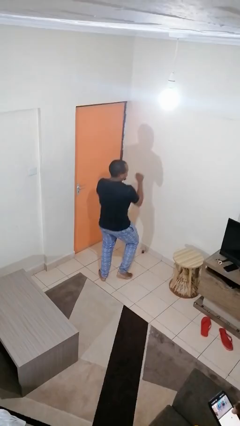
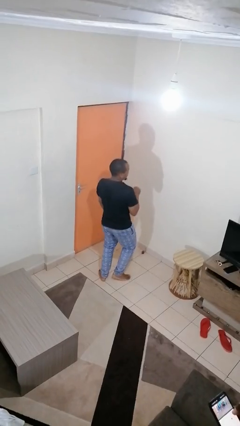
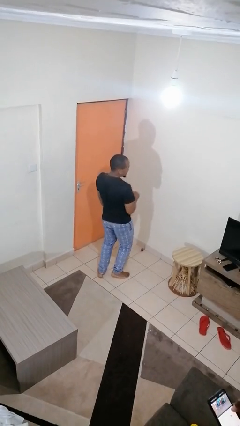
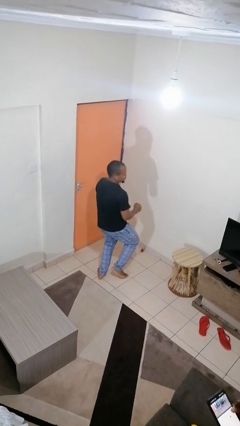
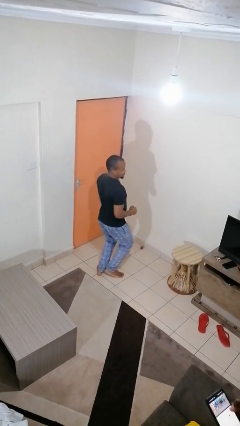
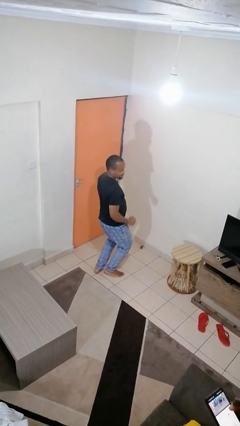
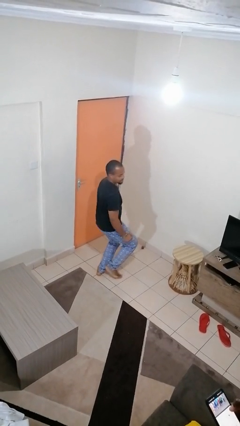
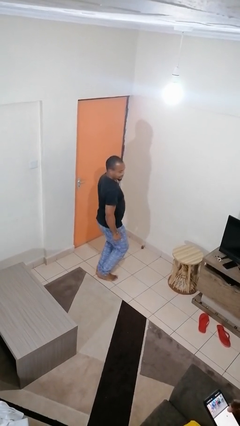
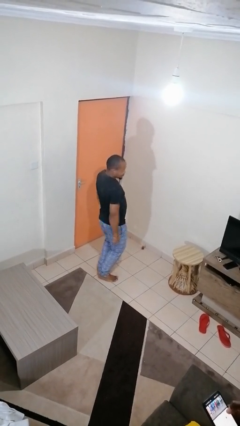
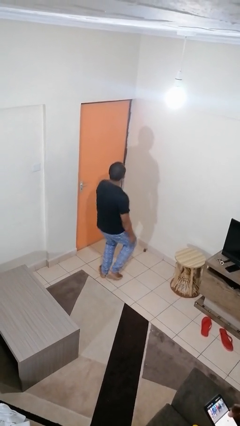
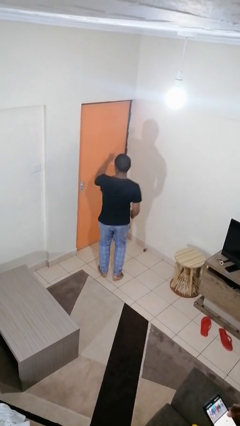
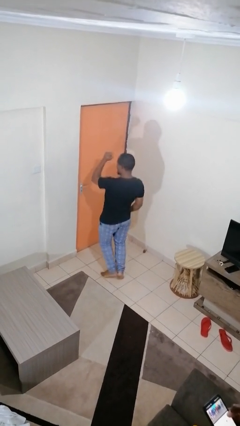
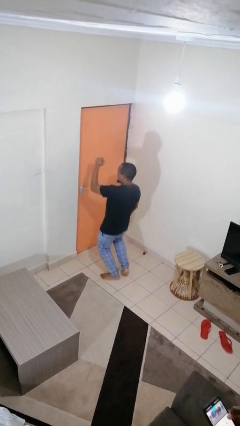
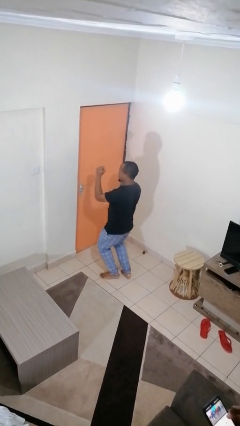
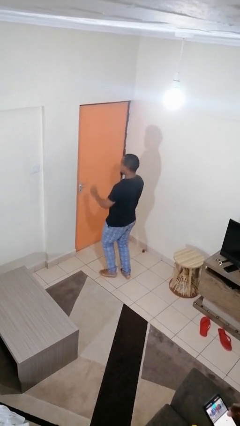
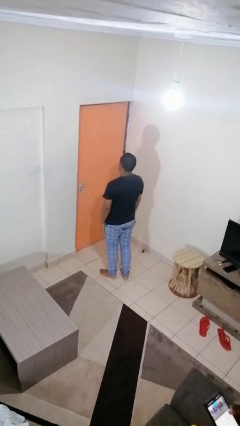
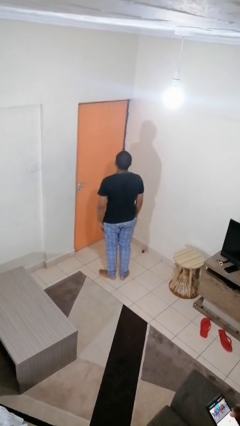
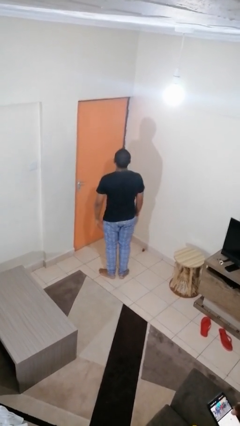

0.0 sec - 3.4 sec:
person dances in place

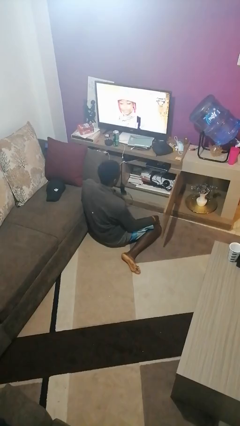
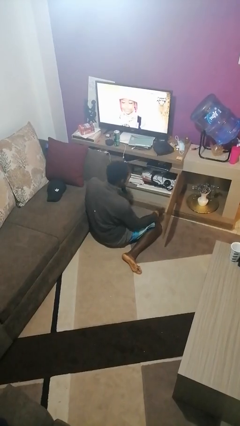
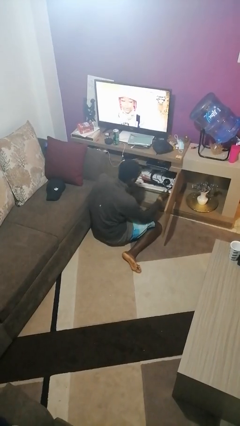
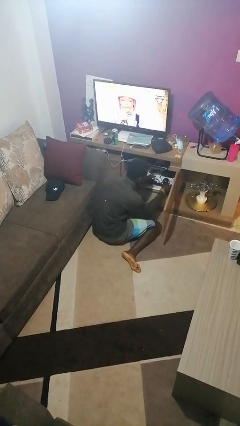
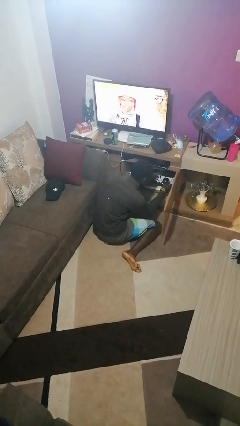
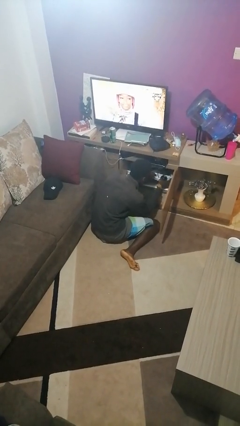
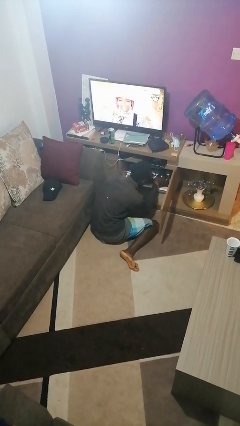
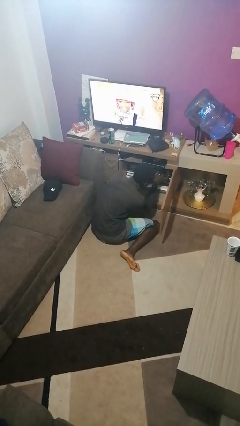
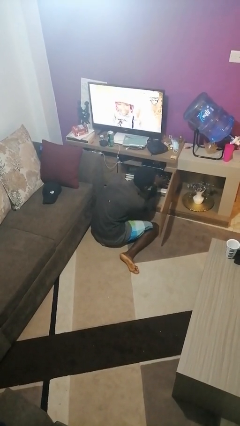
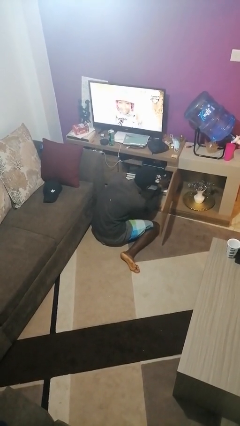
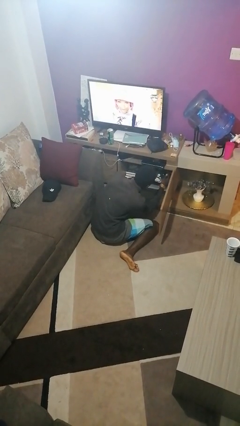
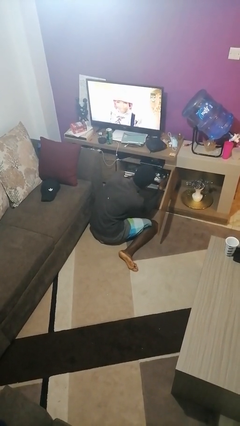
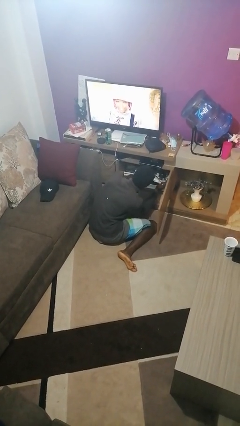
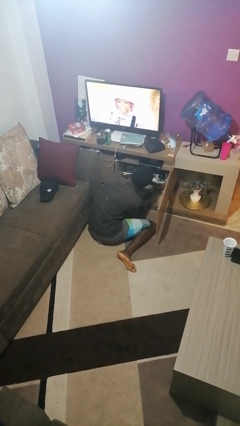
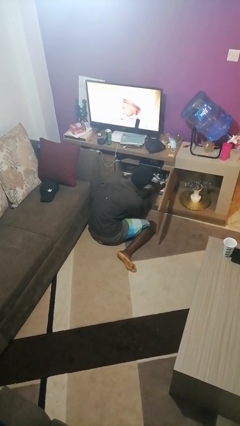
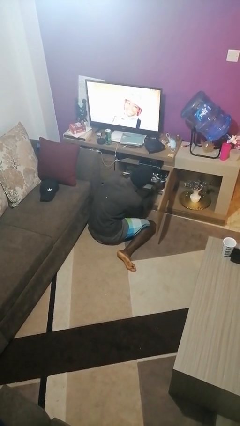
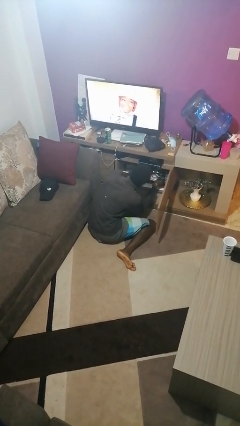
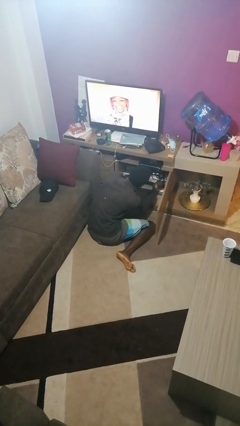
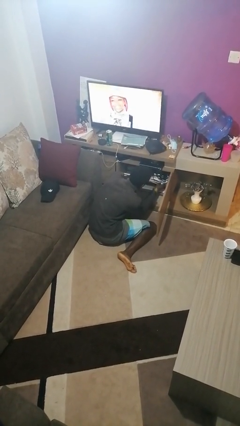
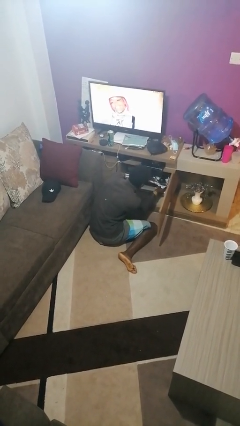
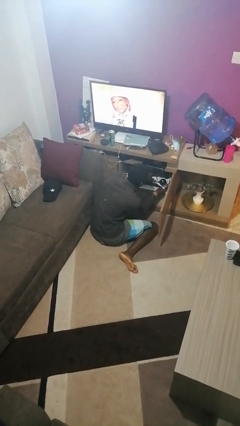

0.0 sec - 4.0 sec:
person searches in cabinet

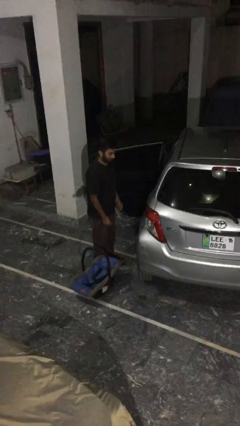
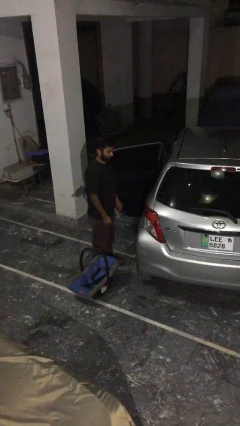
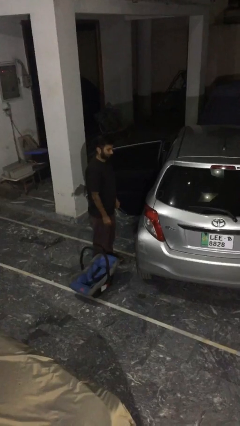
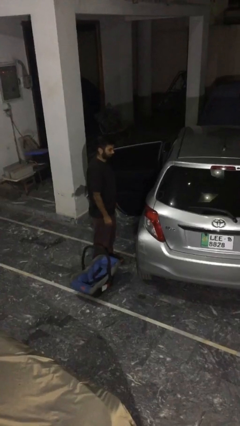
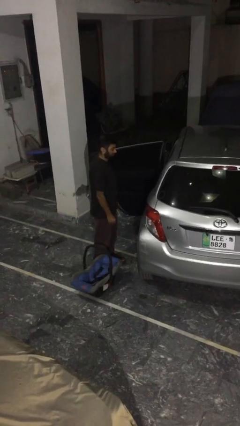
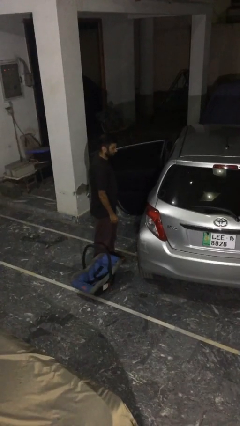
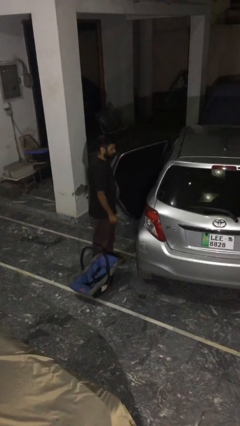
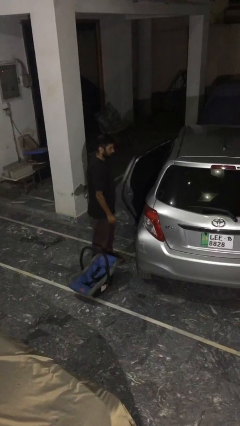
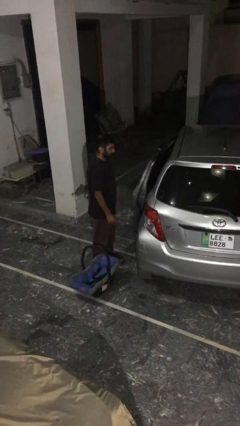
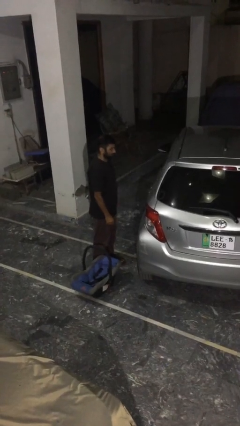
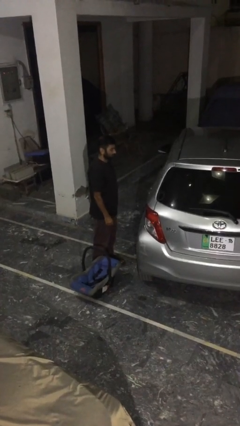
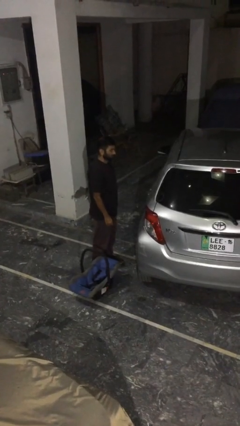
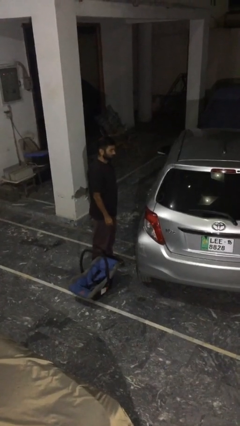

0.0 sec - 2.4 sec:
person closes car door

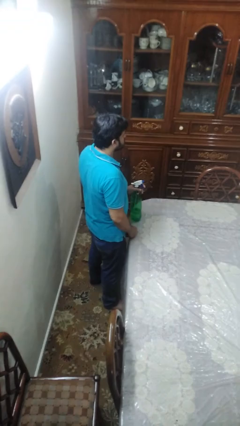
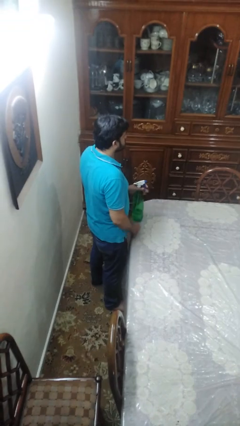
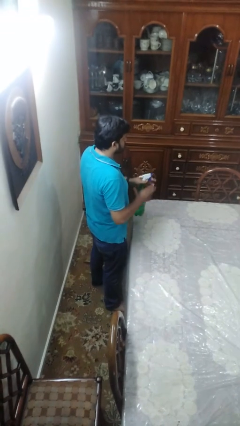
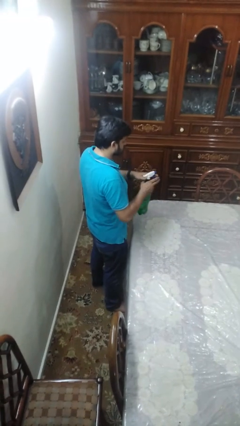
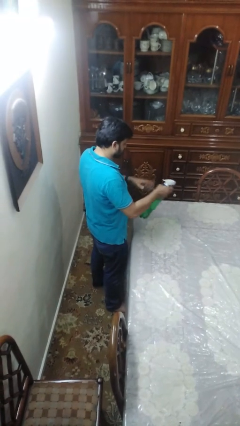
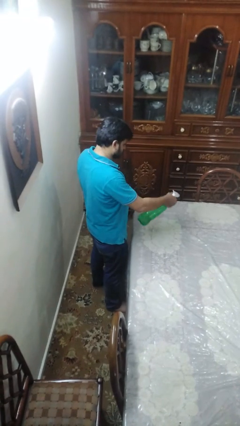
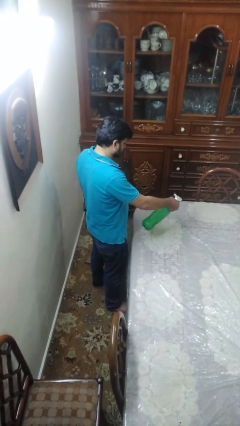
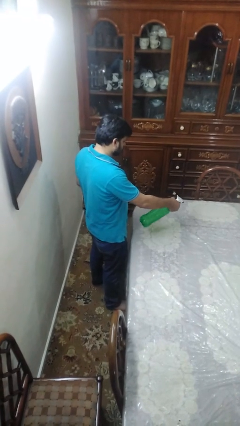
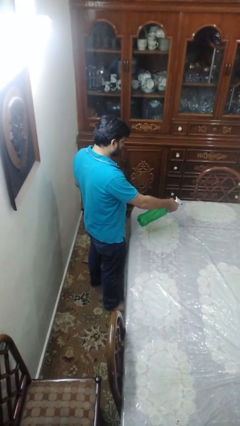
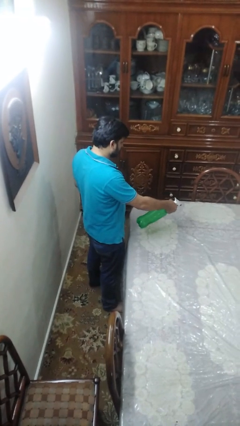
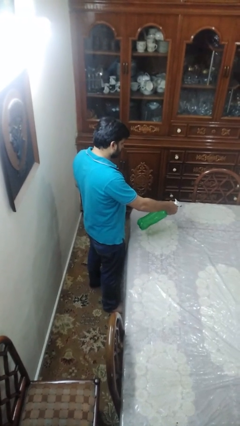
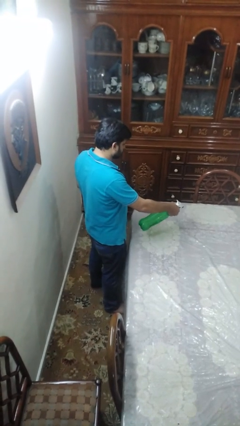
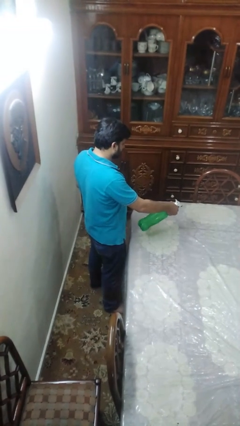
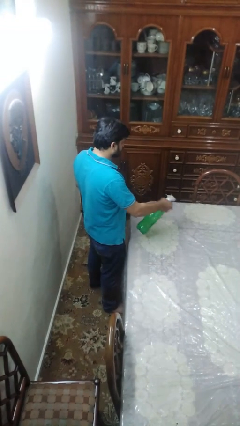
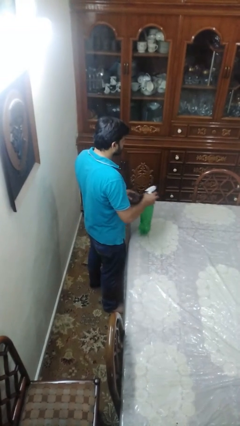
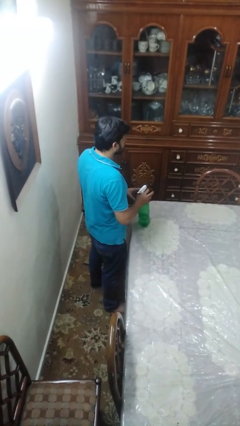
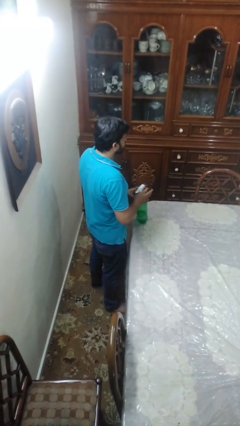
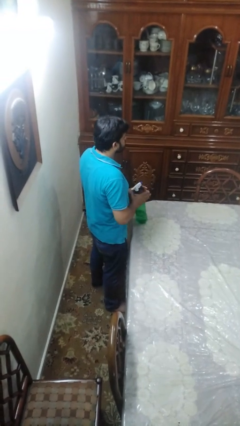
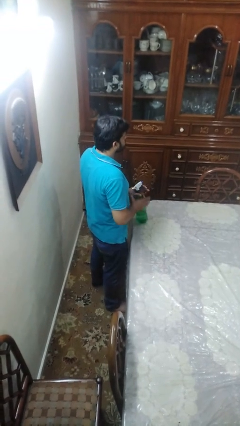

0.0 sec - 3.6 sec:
person sprays from bottle

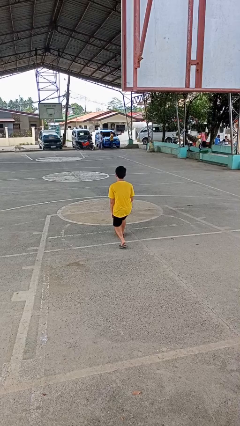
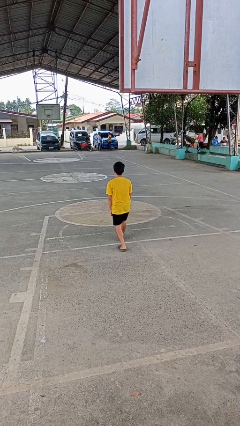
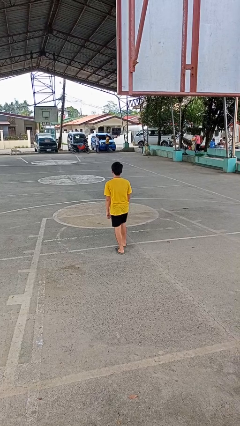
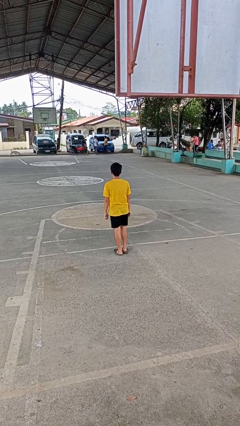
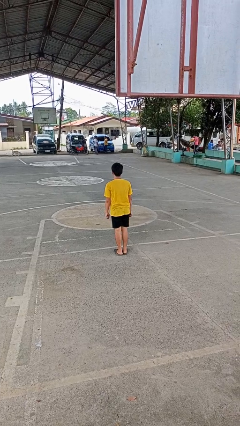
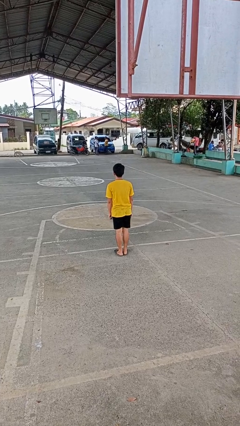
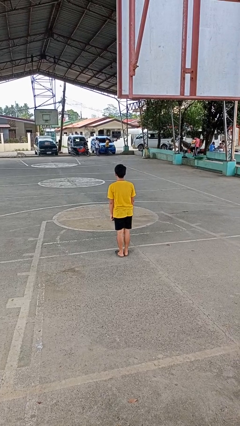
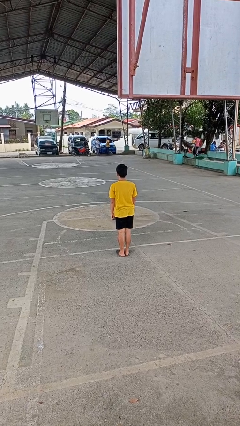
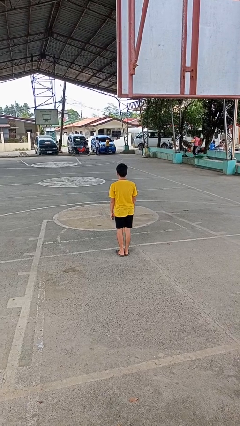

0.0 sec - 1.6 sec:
person stands up from floor

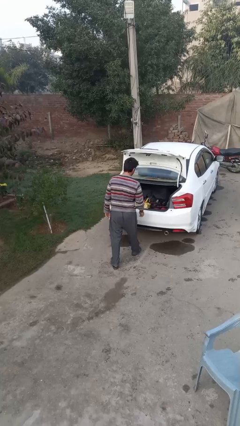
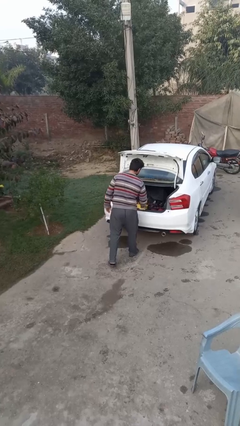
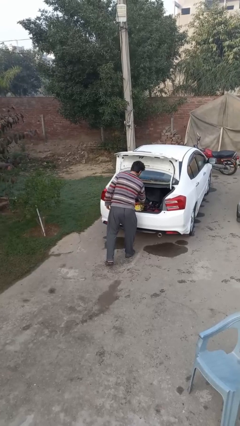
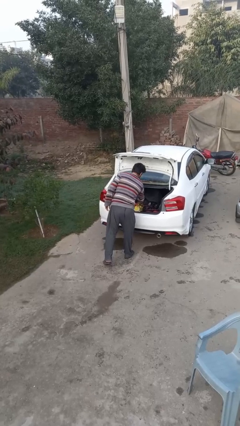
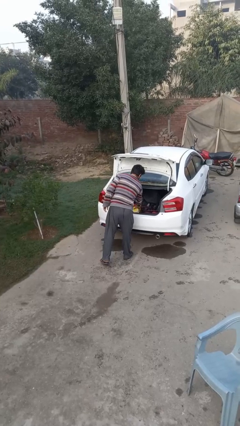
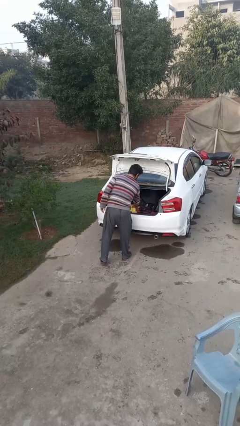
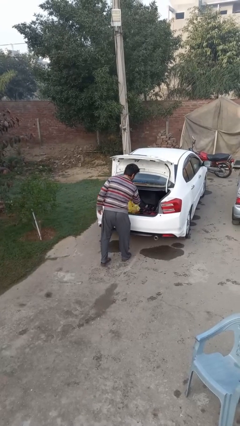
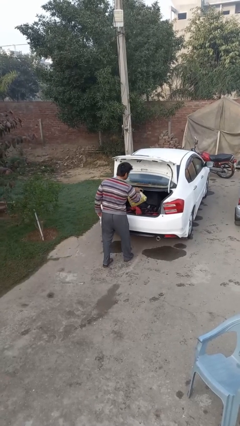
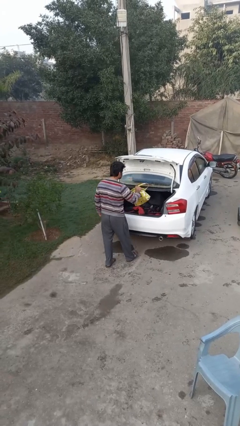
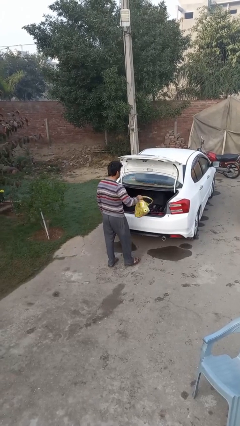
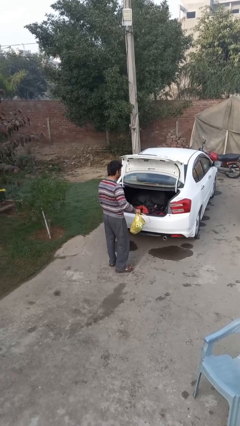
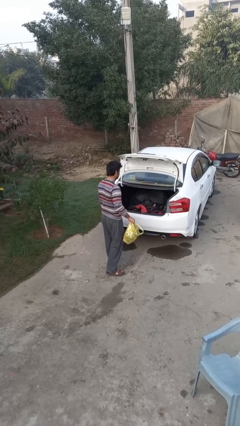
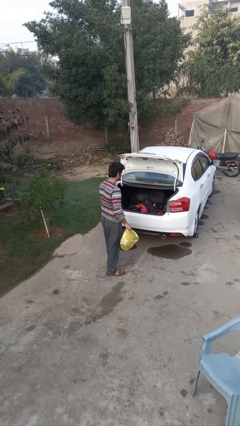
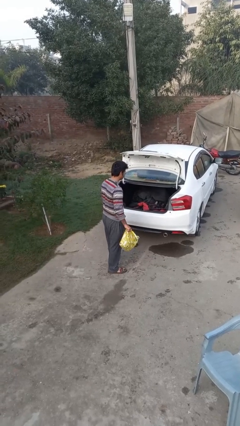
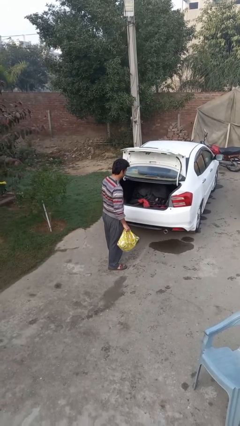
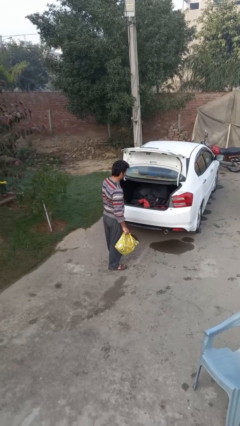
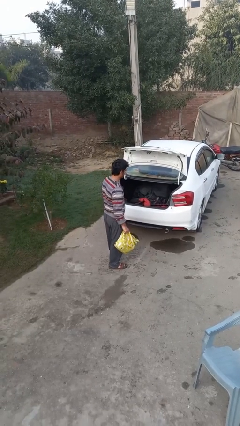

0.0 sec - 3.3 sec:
person unloads car
